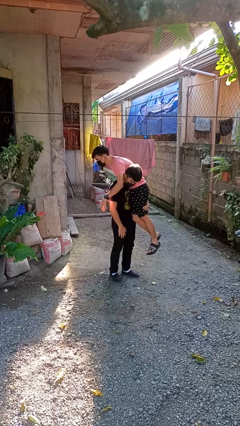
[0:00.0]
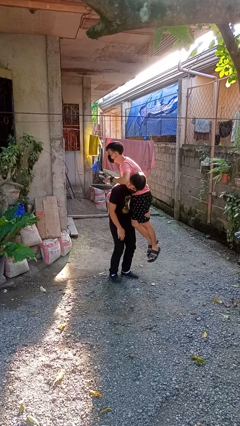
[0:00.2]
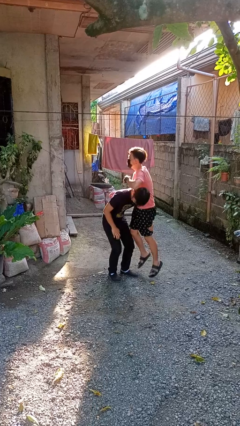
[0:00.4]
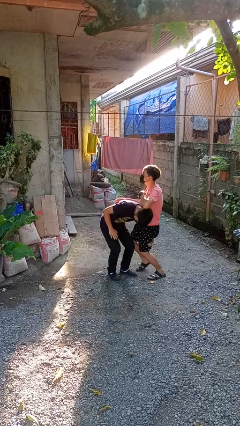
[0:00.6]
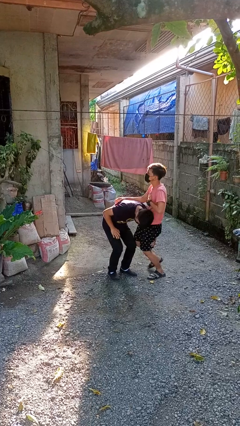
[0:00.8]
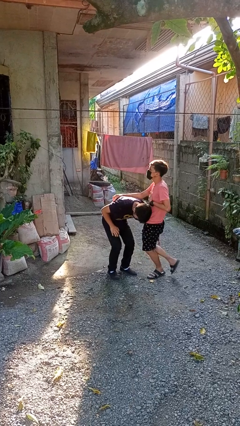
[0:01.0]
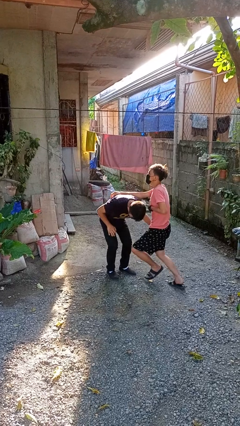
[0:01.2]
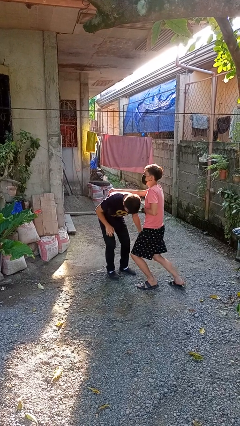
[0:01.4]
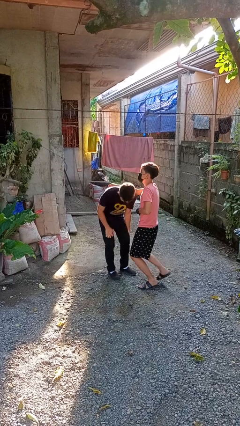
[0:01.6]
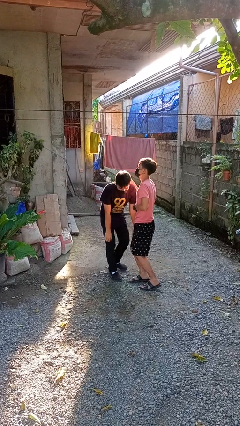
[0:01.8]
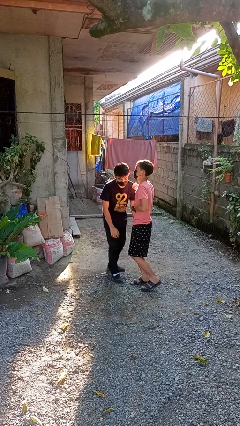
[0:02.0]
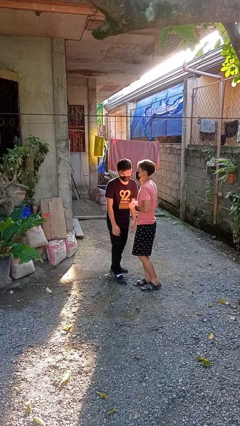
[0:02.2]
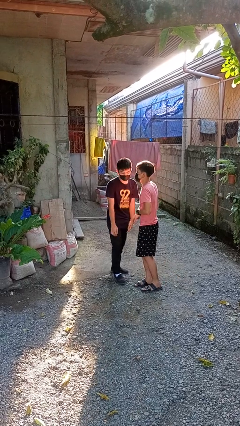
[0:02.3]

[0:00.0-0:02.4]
person puts down person

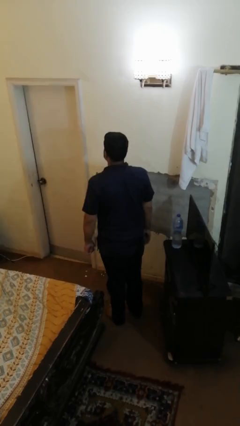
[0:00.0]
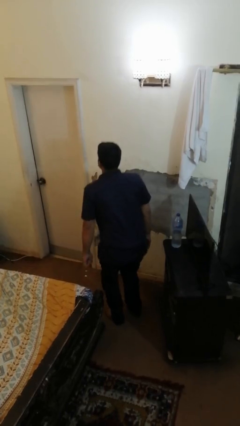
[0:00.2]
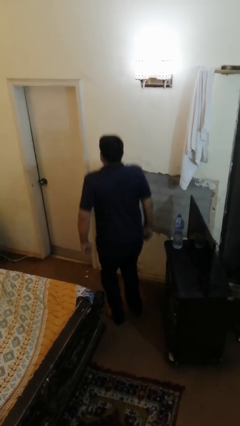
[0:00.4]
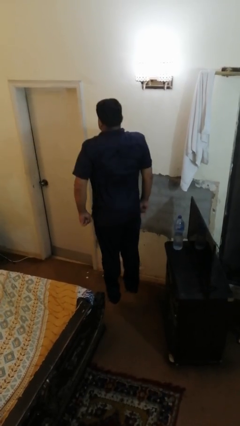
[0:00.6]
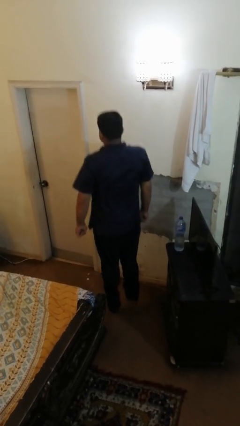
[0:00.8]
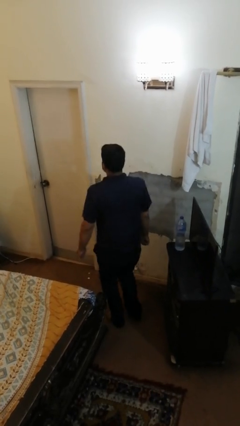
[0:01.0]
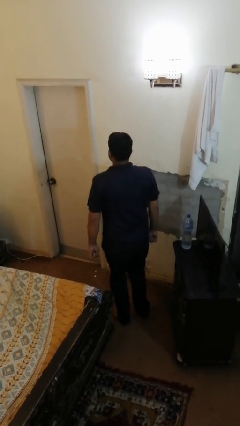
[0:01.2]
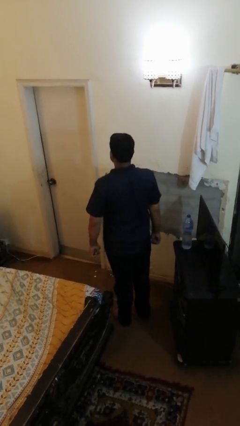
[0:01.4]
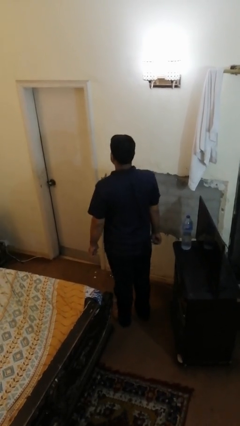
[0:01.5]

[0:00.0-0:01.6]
person jumps

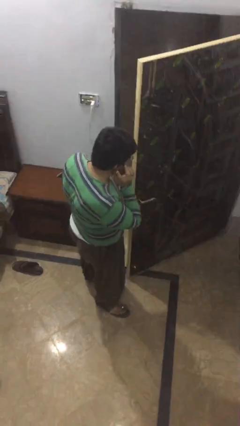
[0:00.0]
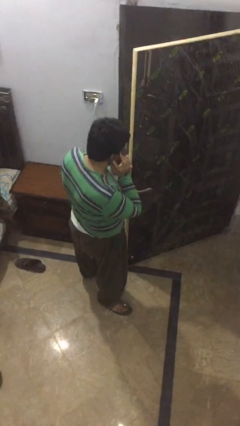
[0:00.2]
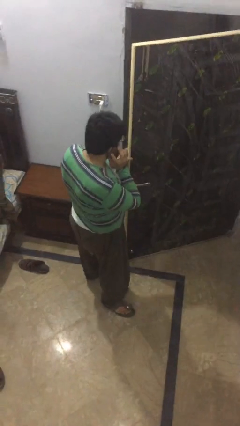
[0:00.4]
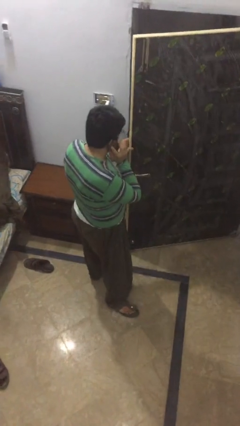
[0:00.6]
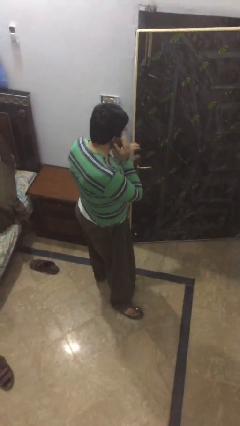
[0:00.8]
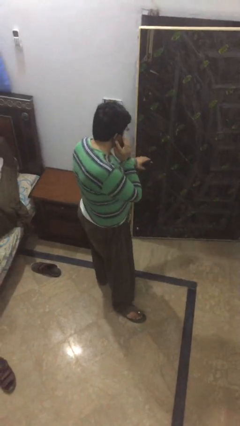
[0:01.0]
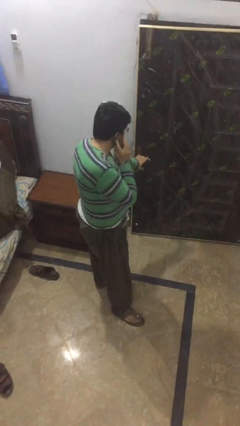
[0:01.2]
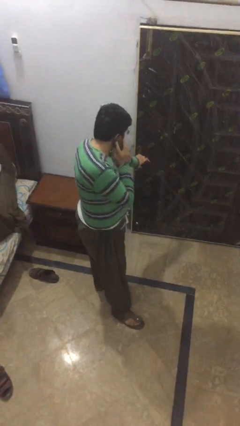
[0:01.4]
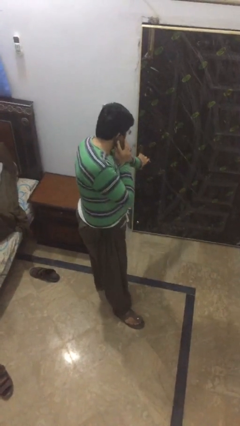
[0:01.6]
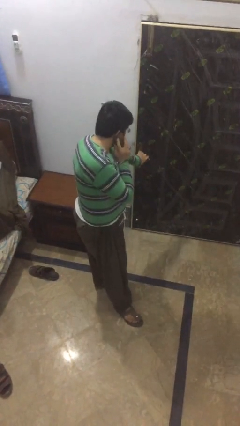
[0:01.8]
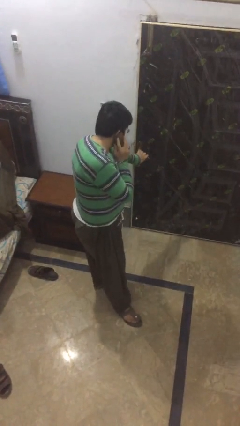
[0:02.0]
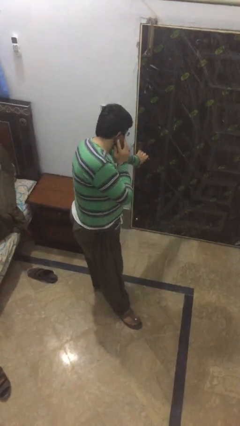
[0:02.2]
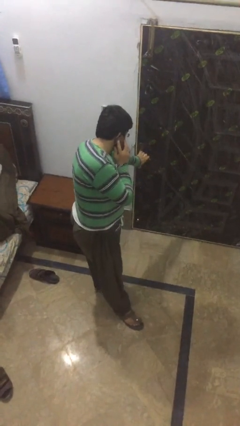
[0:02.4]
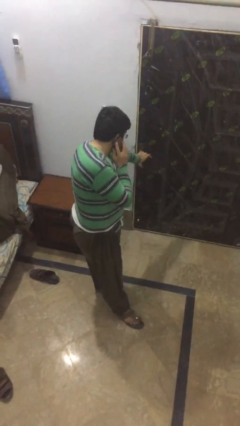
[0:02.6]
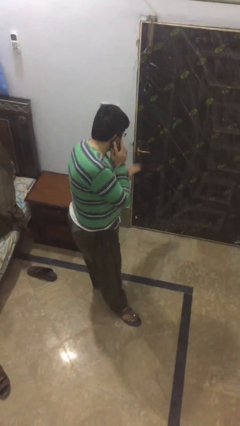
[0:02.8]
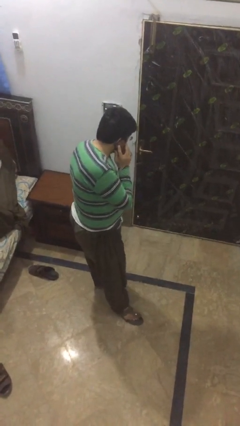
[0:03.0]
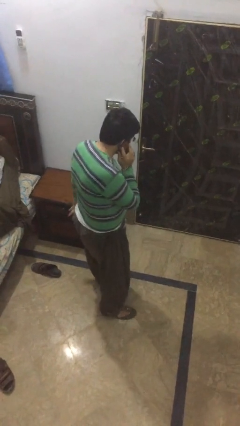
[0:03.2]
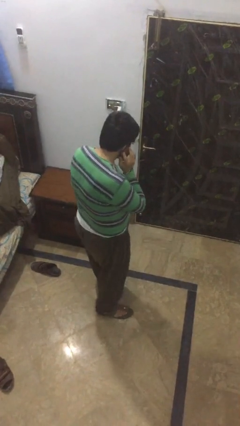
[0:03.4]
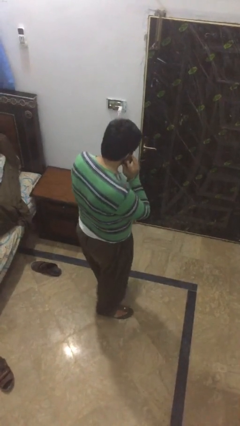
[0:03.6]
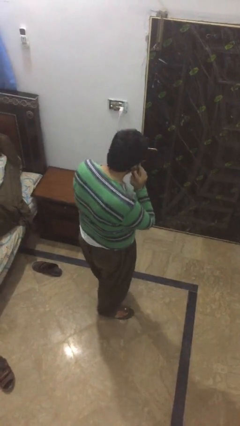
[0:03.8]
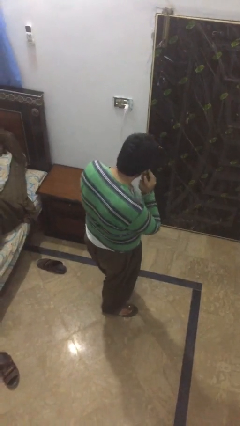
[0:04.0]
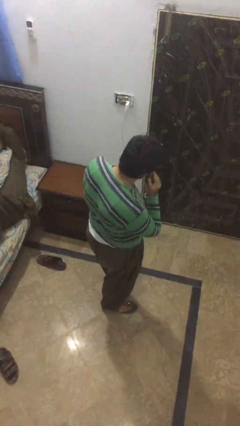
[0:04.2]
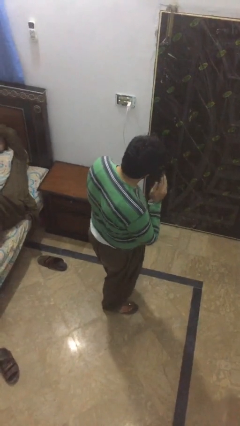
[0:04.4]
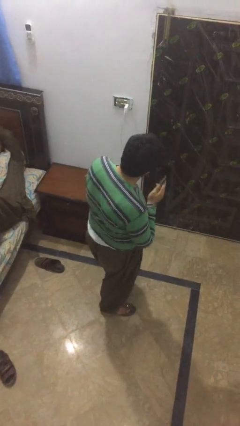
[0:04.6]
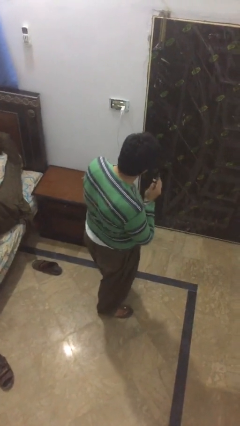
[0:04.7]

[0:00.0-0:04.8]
person closes facility door

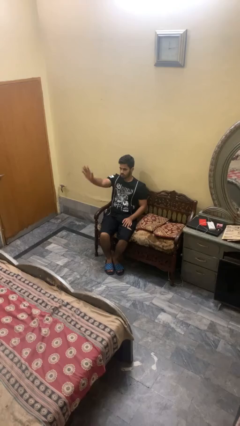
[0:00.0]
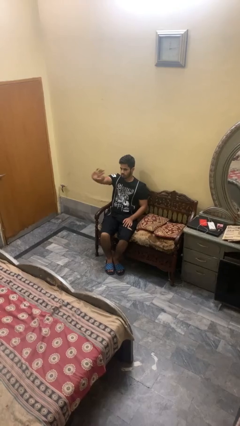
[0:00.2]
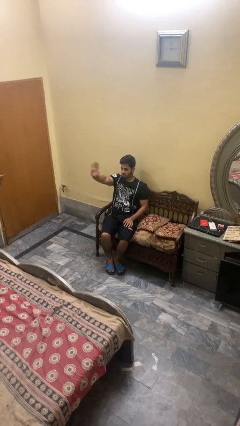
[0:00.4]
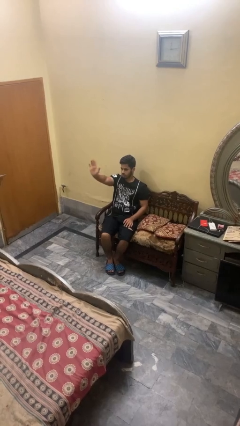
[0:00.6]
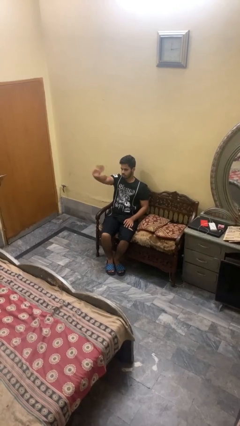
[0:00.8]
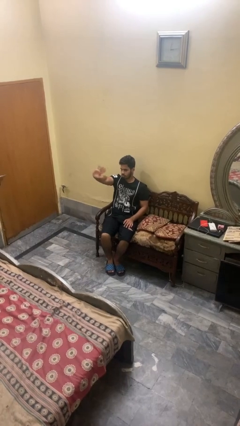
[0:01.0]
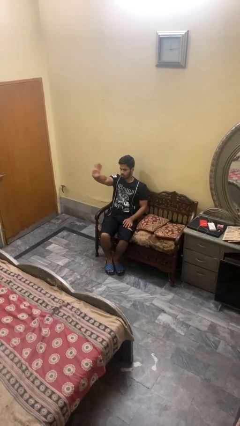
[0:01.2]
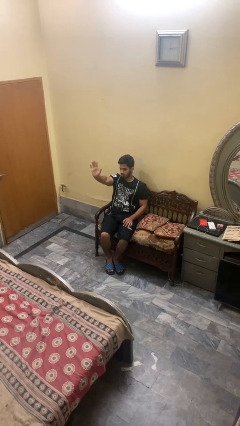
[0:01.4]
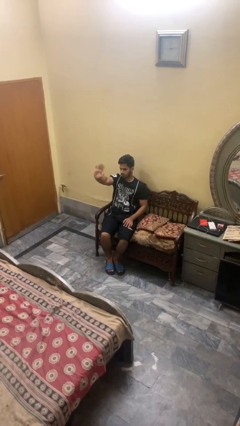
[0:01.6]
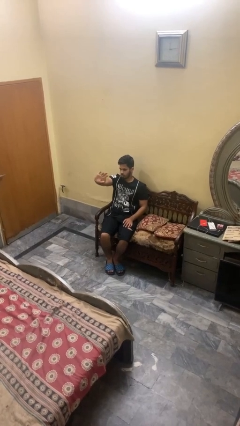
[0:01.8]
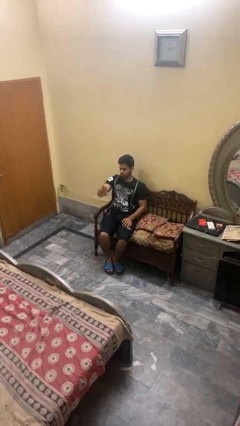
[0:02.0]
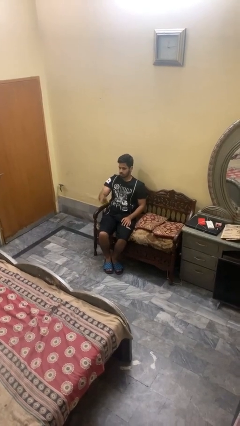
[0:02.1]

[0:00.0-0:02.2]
person waves at person

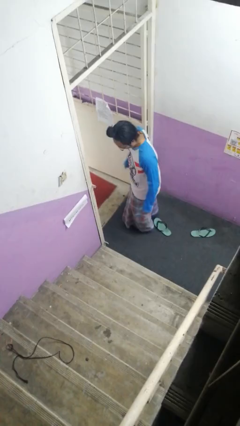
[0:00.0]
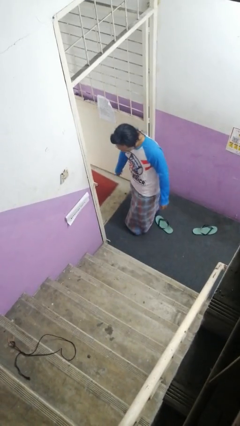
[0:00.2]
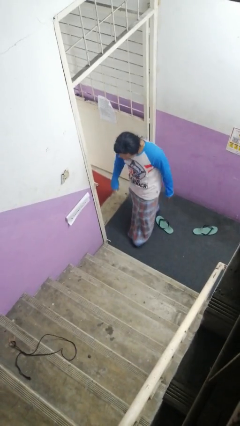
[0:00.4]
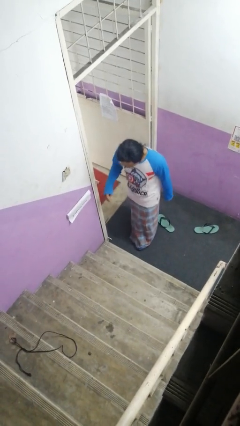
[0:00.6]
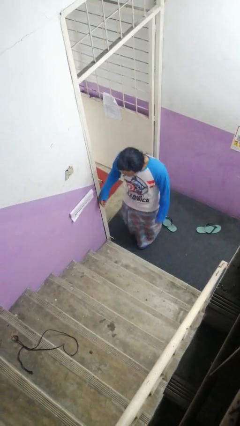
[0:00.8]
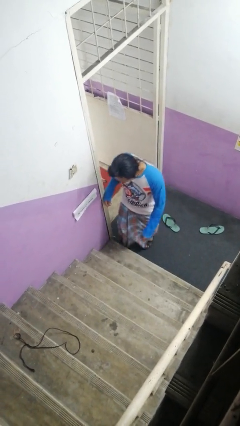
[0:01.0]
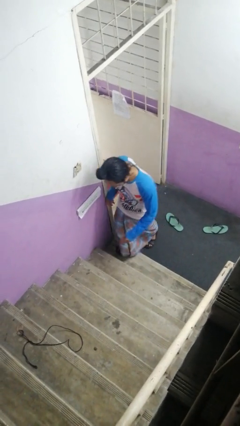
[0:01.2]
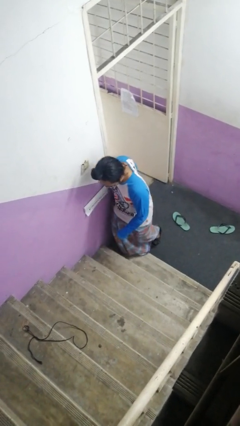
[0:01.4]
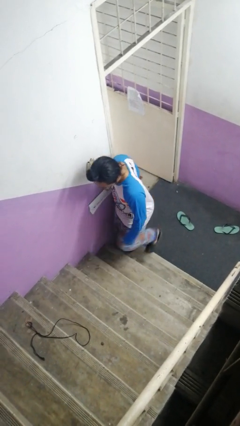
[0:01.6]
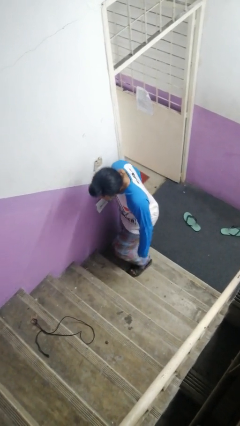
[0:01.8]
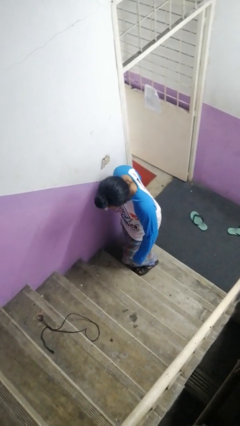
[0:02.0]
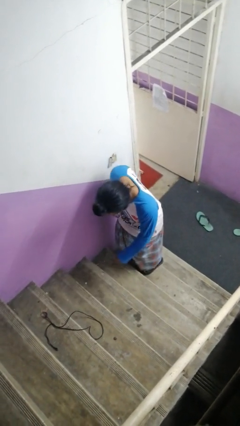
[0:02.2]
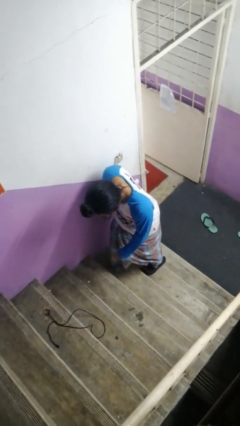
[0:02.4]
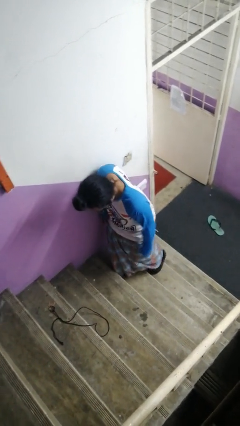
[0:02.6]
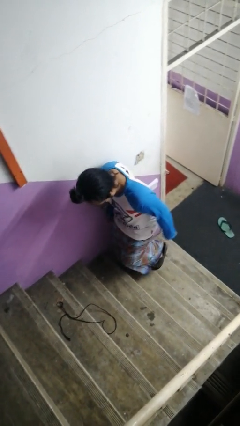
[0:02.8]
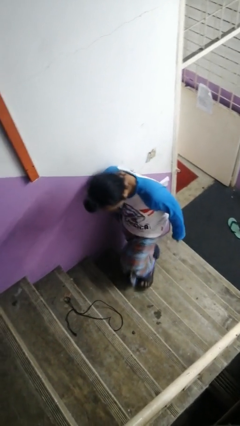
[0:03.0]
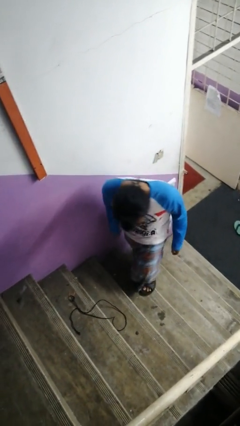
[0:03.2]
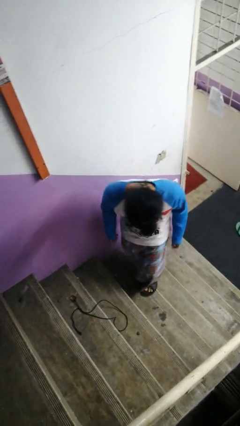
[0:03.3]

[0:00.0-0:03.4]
person climbs up stairs

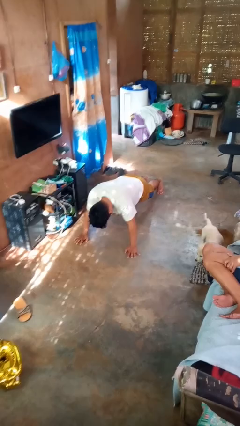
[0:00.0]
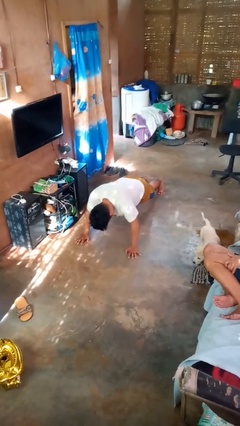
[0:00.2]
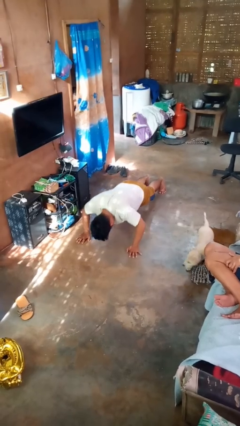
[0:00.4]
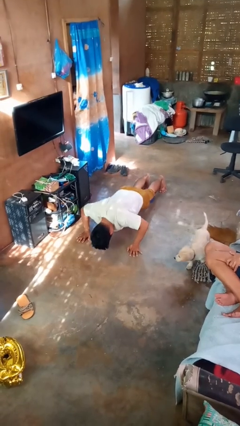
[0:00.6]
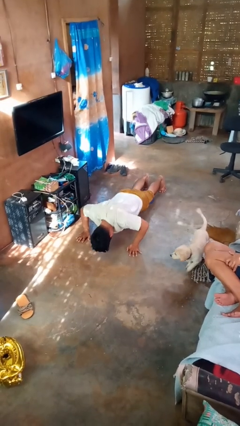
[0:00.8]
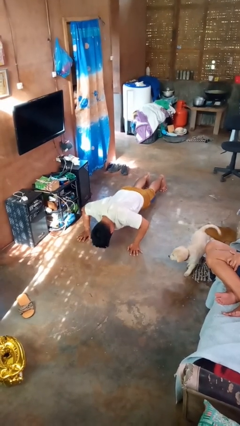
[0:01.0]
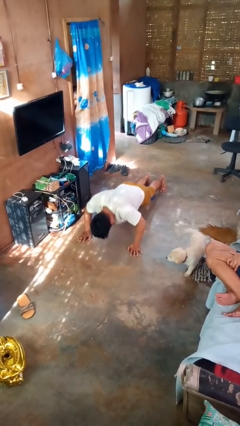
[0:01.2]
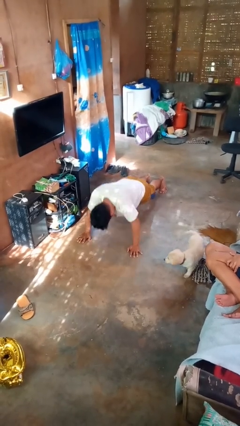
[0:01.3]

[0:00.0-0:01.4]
person exercises with pushup

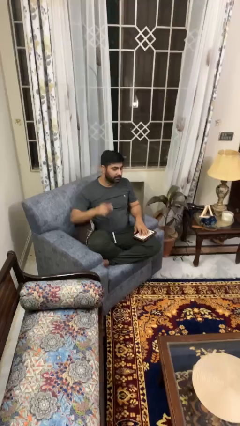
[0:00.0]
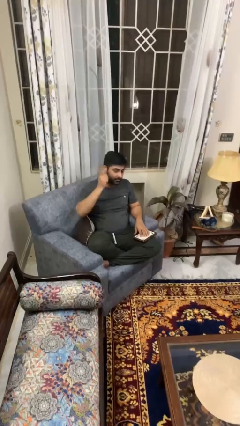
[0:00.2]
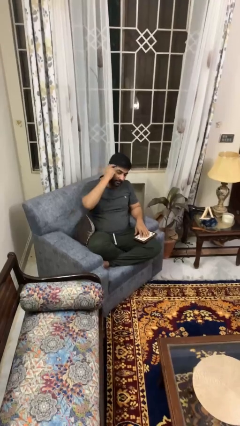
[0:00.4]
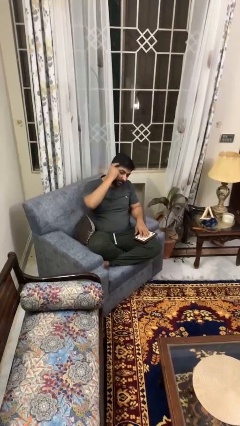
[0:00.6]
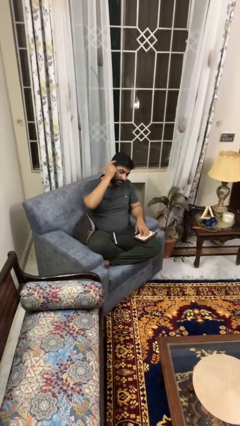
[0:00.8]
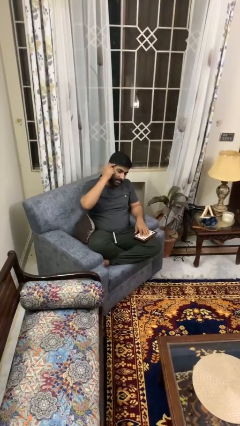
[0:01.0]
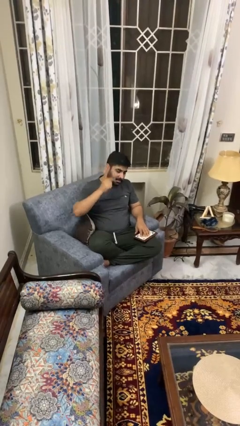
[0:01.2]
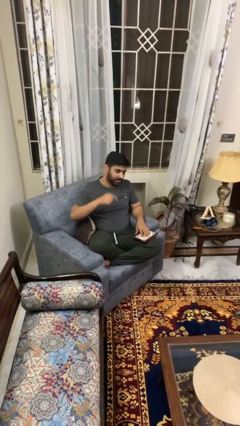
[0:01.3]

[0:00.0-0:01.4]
person pats head

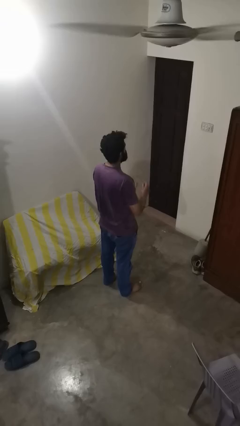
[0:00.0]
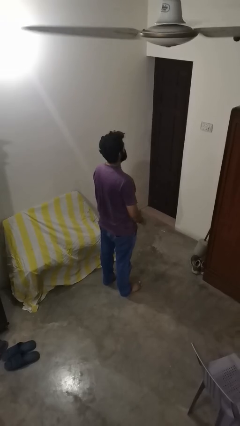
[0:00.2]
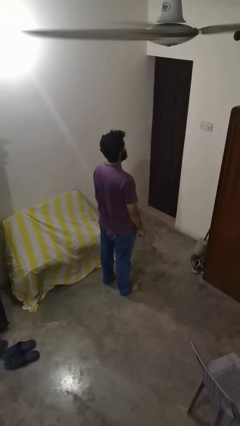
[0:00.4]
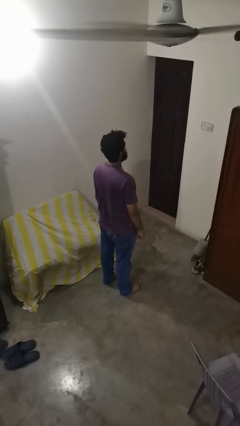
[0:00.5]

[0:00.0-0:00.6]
person takes off glasses
